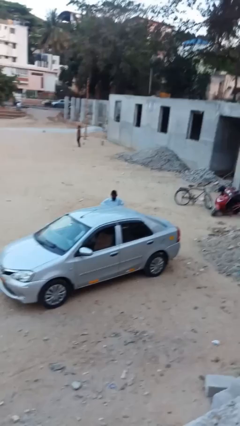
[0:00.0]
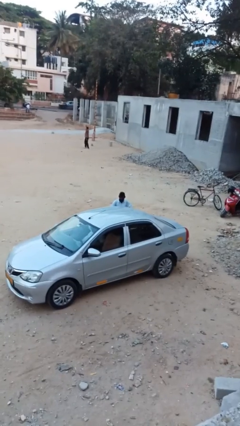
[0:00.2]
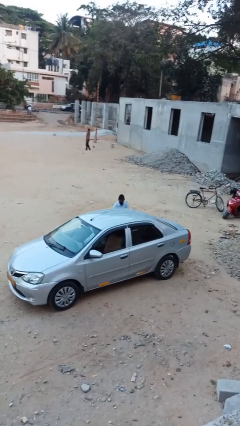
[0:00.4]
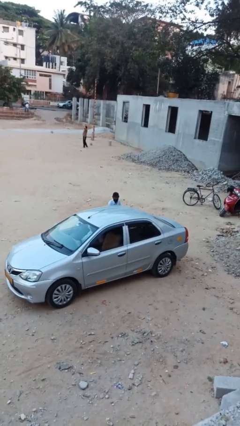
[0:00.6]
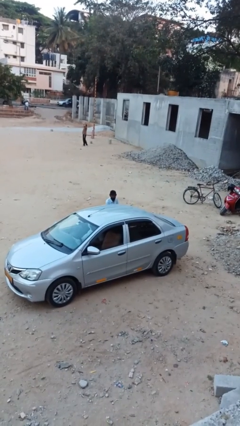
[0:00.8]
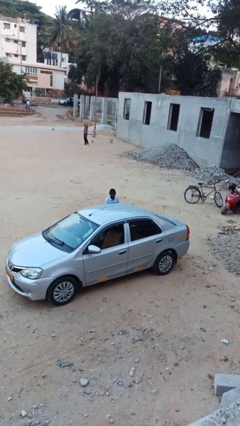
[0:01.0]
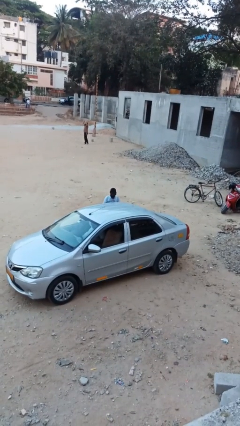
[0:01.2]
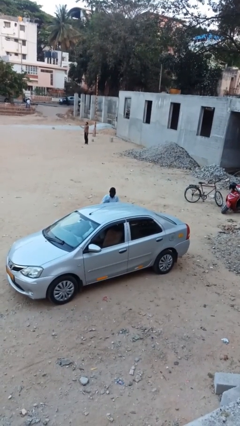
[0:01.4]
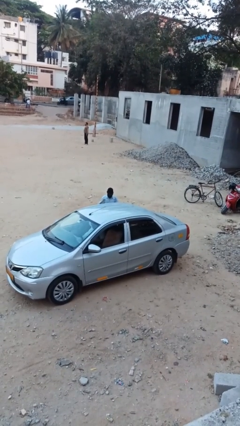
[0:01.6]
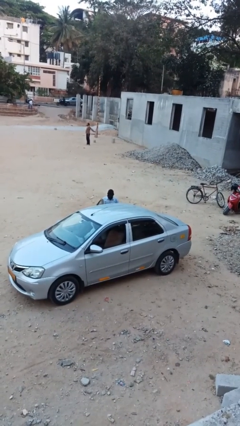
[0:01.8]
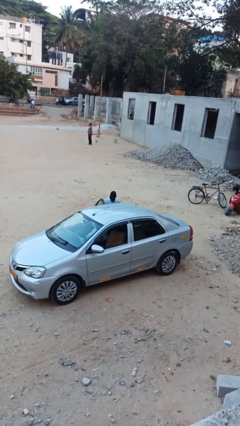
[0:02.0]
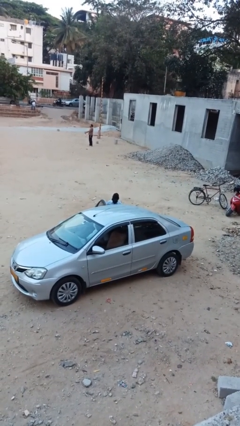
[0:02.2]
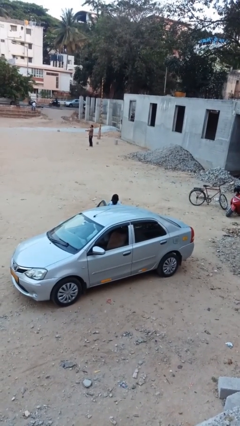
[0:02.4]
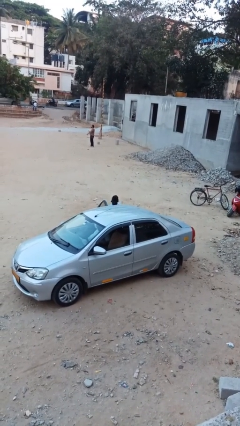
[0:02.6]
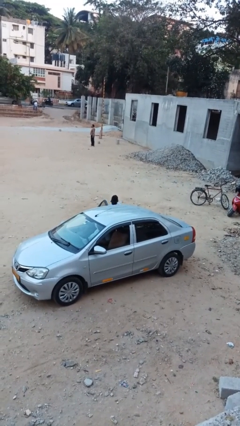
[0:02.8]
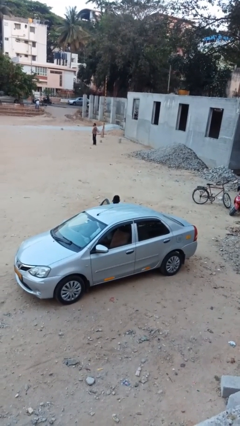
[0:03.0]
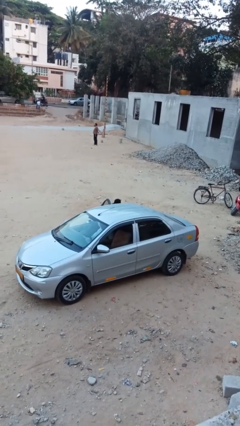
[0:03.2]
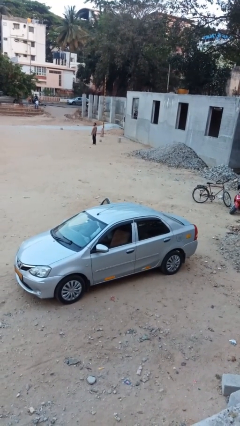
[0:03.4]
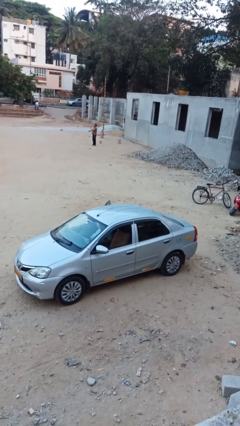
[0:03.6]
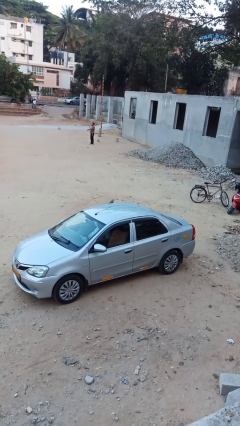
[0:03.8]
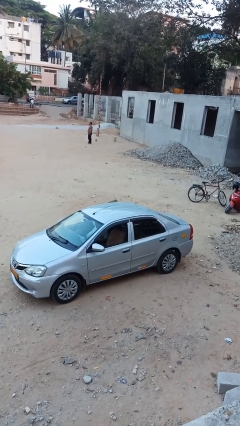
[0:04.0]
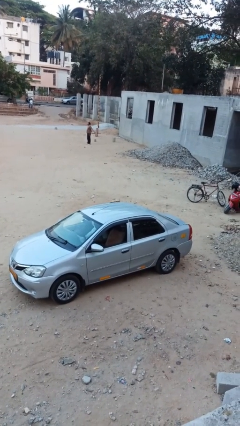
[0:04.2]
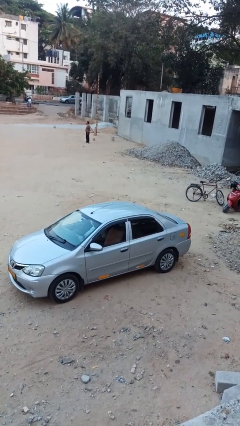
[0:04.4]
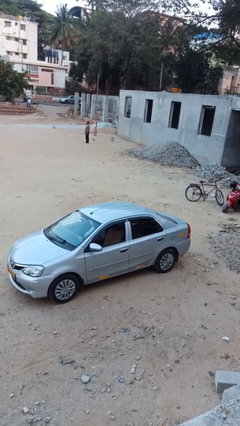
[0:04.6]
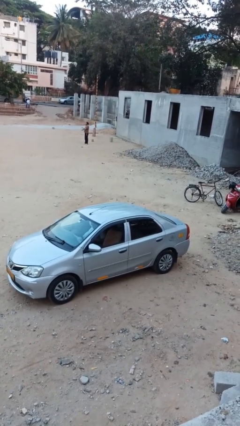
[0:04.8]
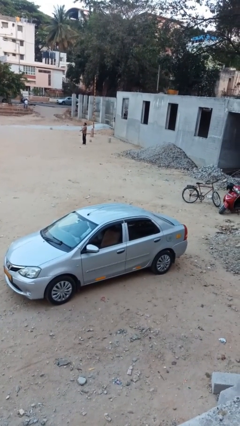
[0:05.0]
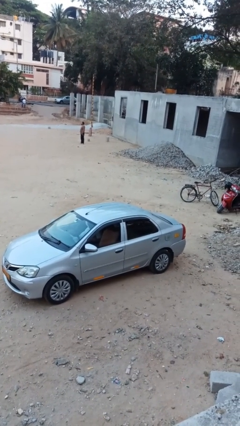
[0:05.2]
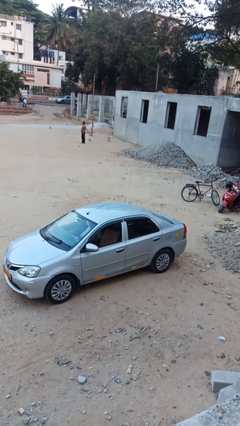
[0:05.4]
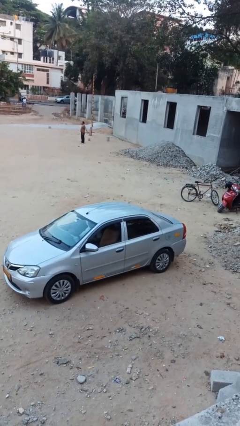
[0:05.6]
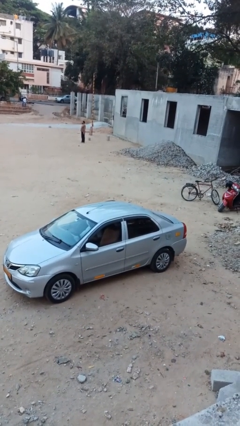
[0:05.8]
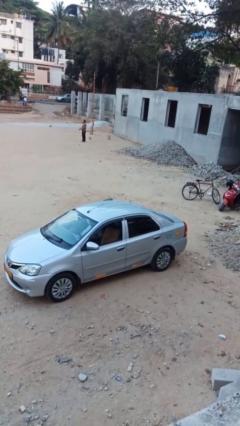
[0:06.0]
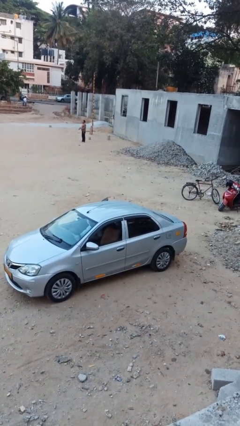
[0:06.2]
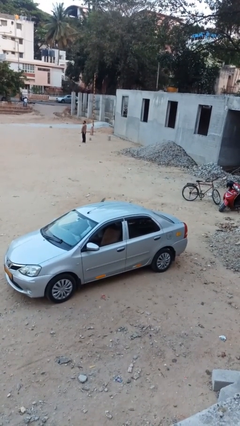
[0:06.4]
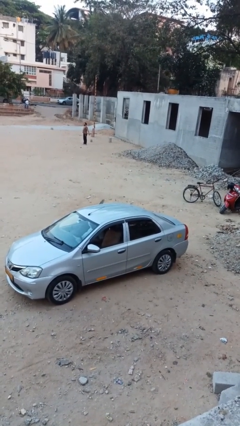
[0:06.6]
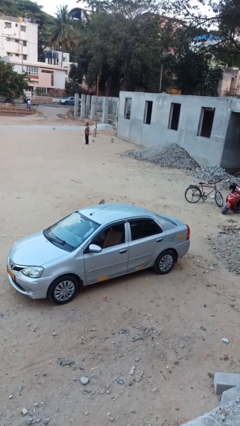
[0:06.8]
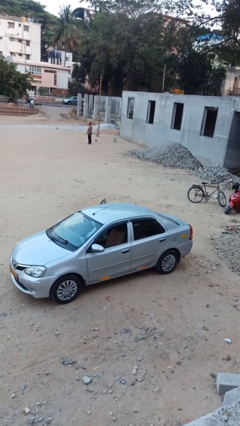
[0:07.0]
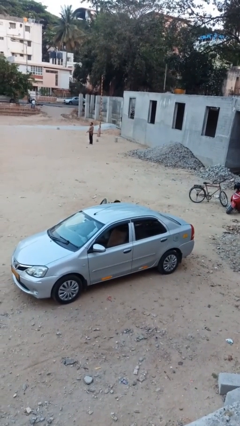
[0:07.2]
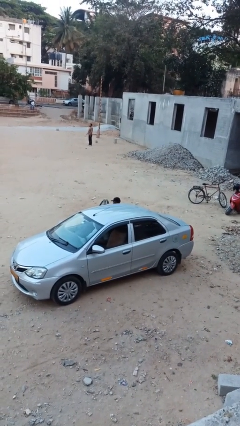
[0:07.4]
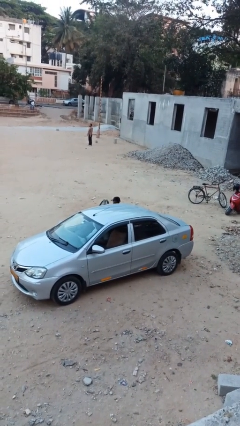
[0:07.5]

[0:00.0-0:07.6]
person enters car

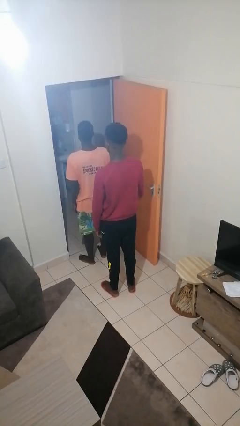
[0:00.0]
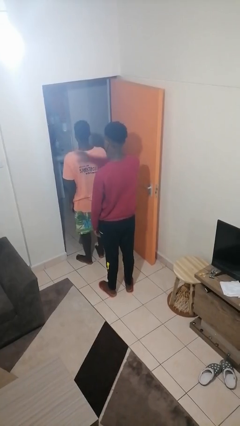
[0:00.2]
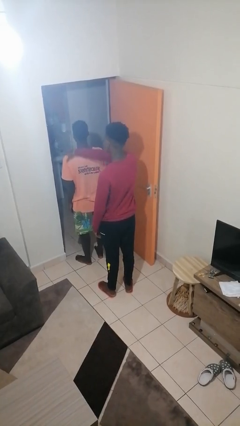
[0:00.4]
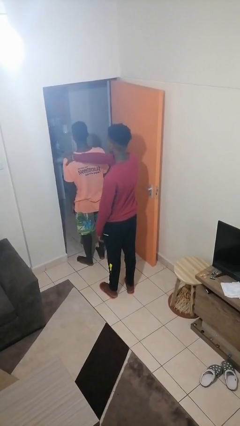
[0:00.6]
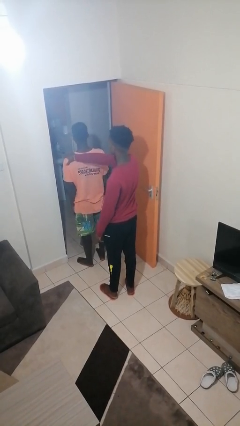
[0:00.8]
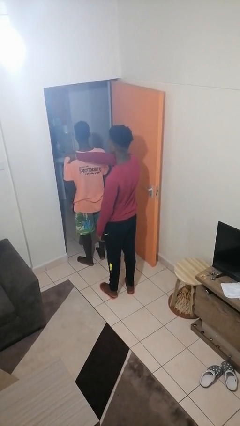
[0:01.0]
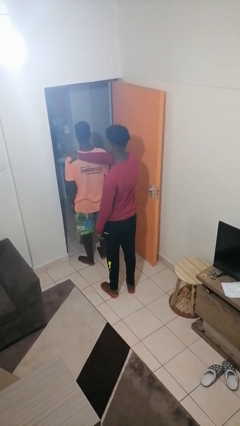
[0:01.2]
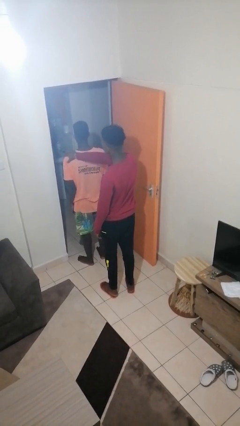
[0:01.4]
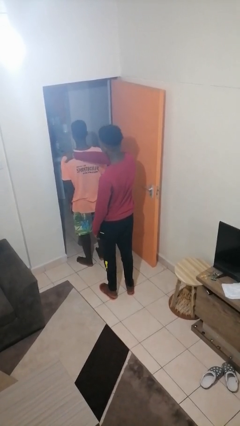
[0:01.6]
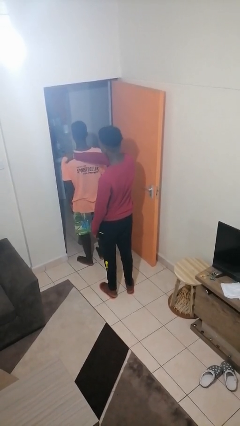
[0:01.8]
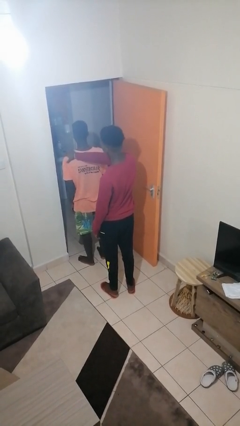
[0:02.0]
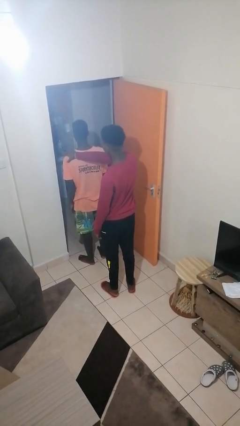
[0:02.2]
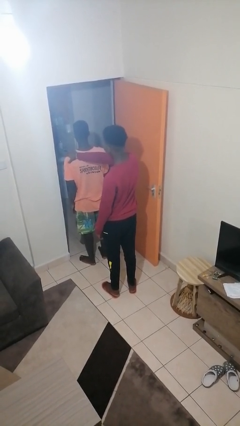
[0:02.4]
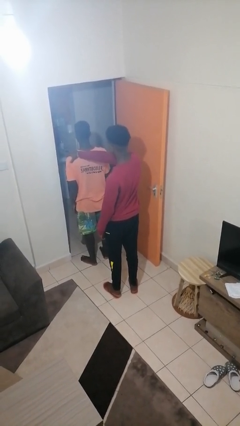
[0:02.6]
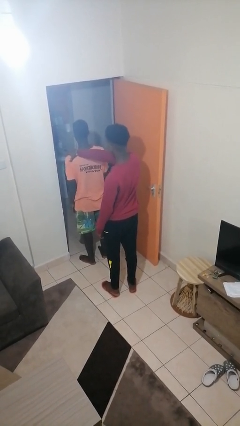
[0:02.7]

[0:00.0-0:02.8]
person grabs person by shoulder

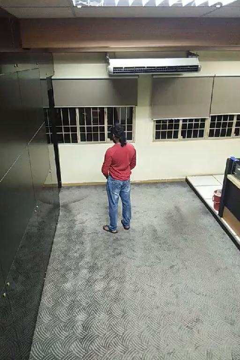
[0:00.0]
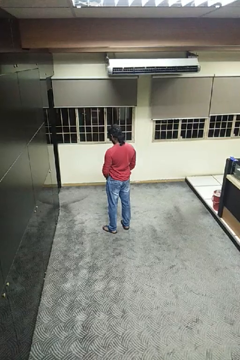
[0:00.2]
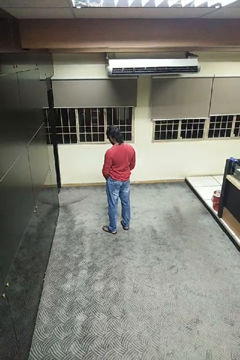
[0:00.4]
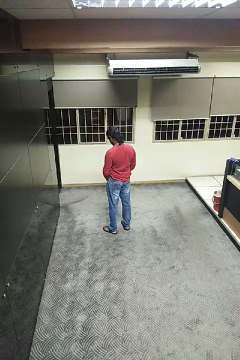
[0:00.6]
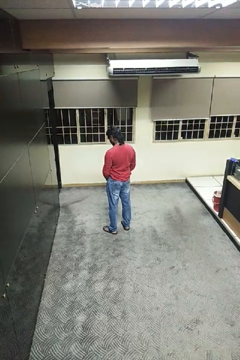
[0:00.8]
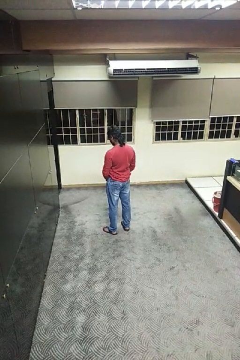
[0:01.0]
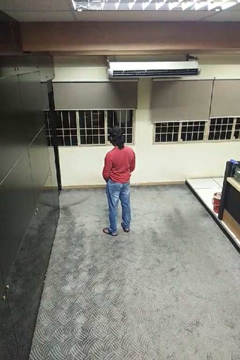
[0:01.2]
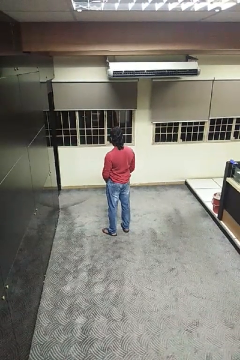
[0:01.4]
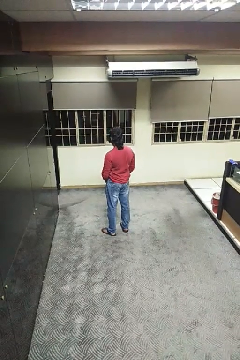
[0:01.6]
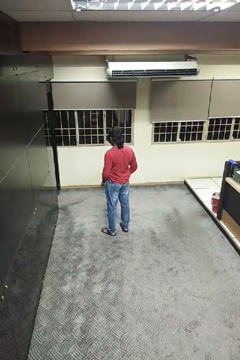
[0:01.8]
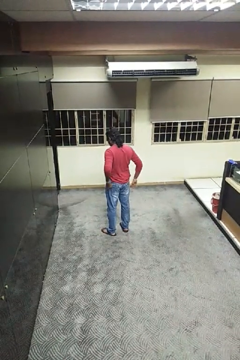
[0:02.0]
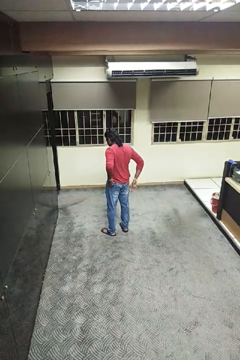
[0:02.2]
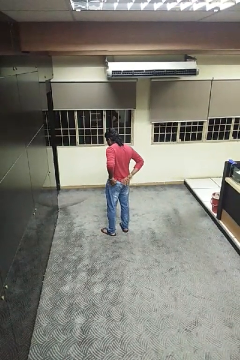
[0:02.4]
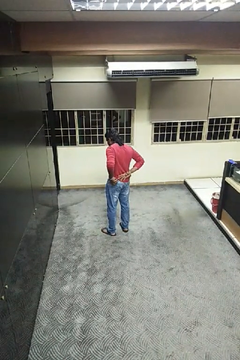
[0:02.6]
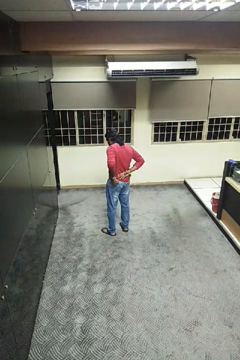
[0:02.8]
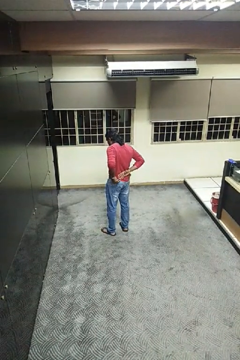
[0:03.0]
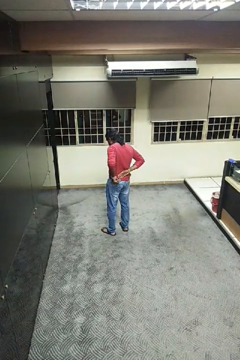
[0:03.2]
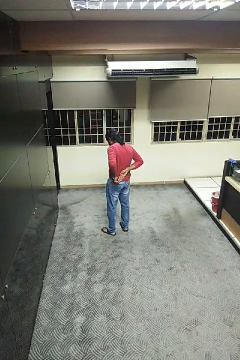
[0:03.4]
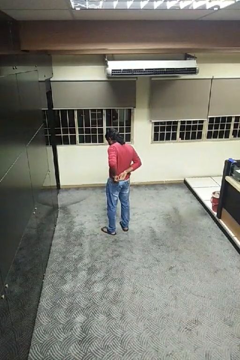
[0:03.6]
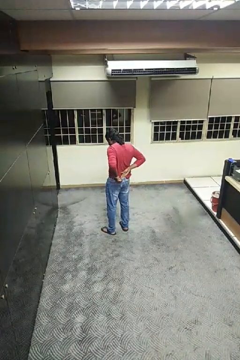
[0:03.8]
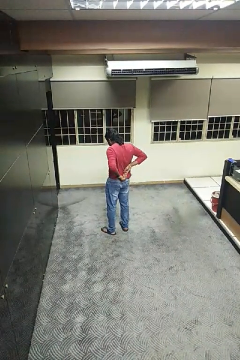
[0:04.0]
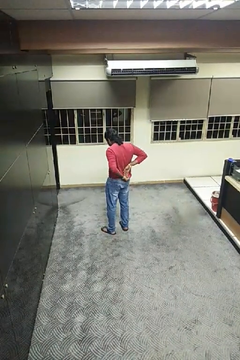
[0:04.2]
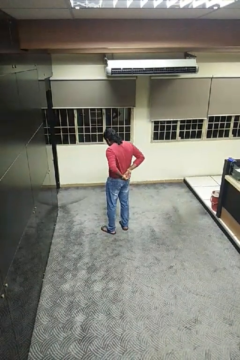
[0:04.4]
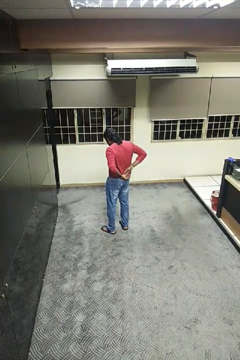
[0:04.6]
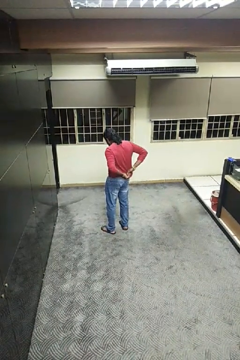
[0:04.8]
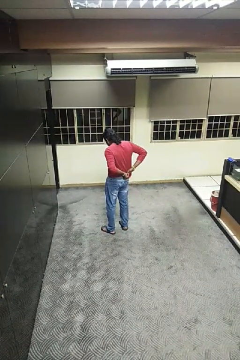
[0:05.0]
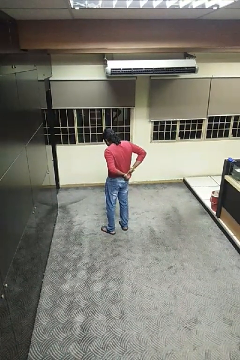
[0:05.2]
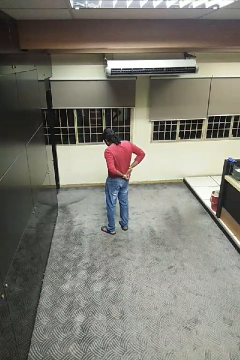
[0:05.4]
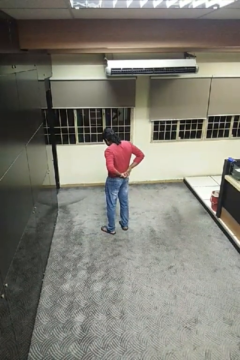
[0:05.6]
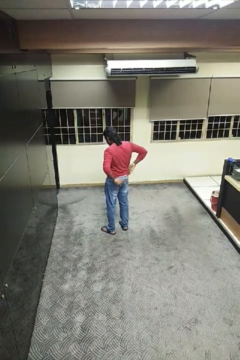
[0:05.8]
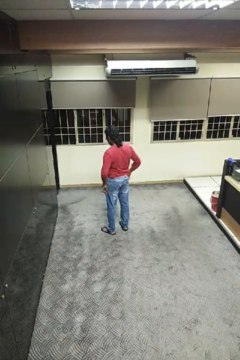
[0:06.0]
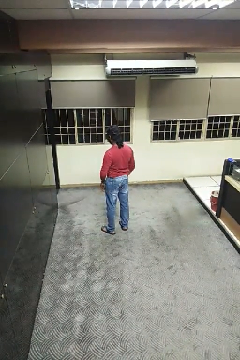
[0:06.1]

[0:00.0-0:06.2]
person tucks in shirt

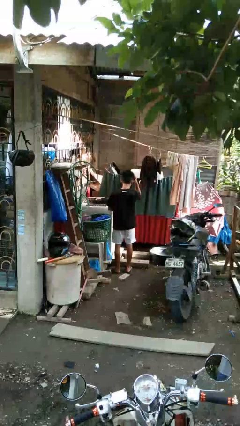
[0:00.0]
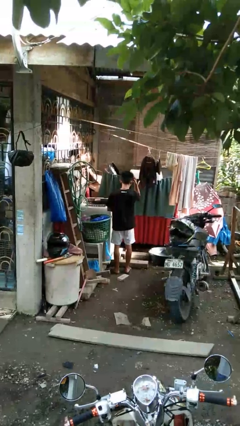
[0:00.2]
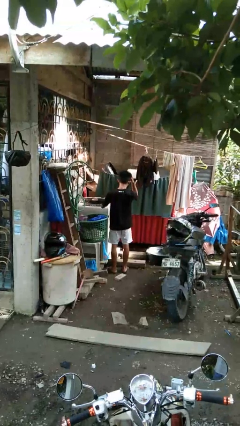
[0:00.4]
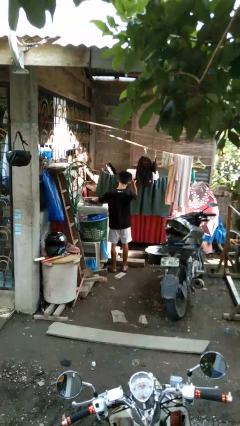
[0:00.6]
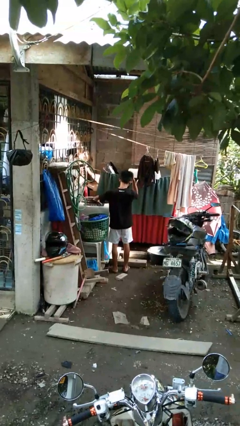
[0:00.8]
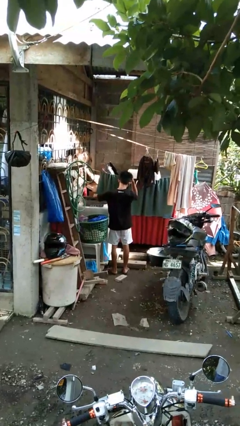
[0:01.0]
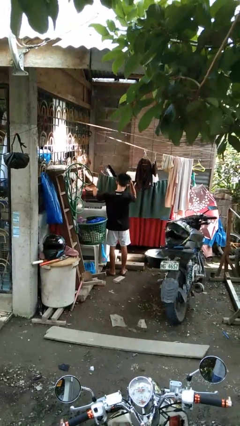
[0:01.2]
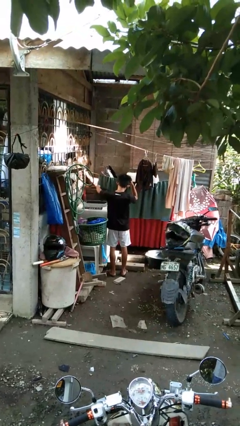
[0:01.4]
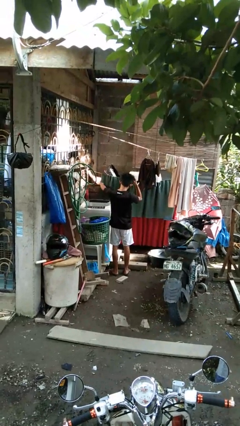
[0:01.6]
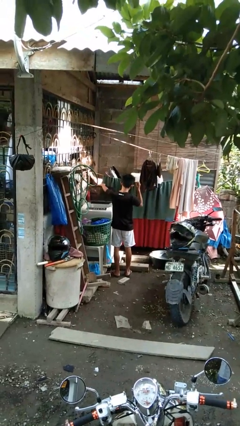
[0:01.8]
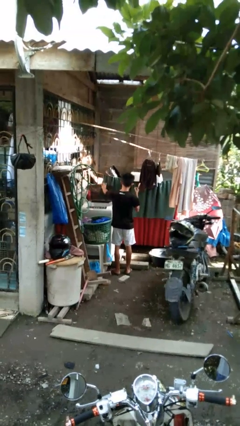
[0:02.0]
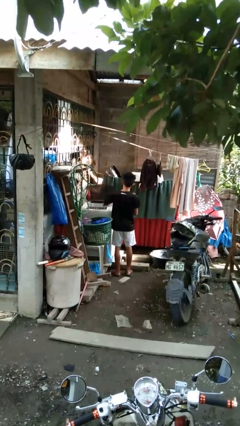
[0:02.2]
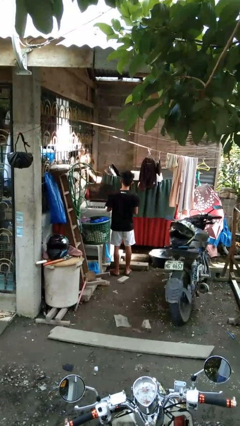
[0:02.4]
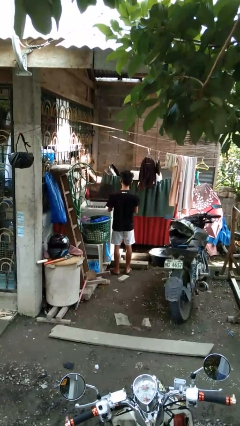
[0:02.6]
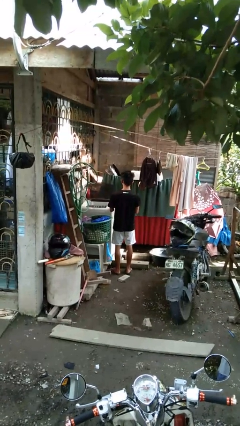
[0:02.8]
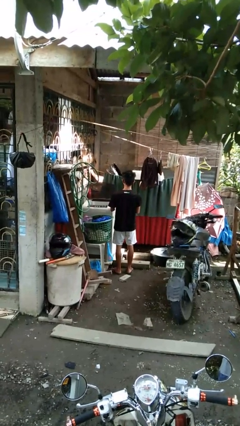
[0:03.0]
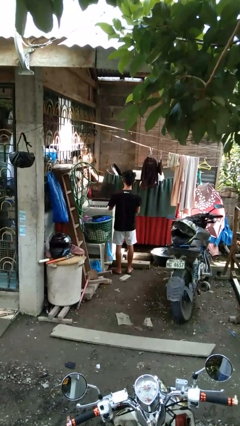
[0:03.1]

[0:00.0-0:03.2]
person opens clothes washer
